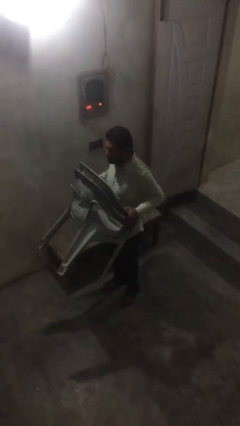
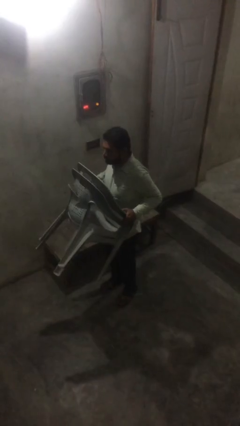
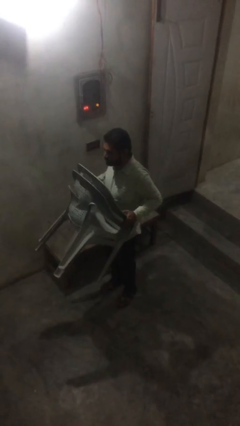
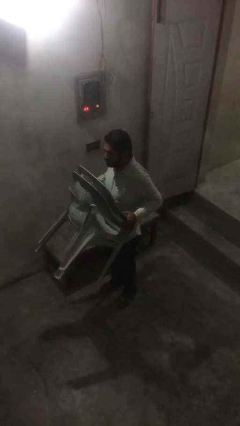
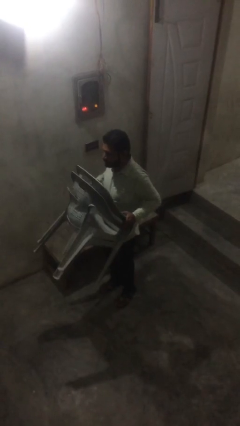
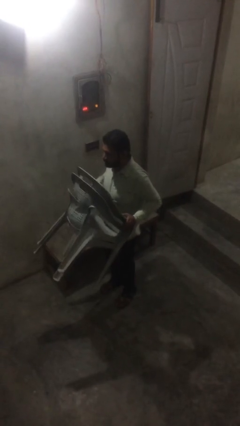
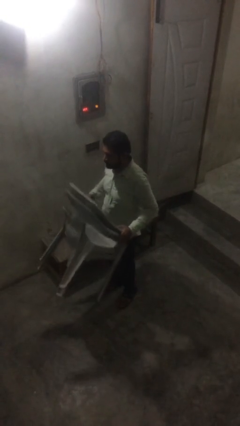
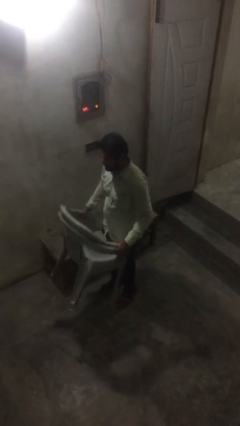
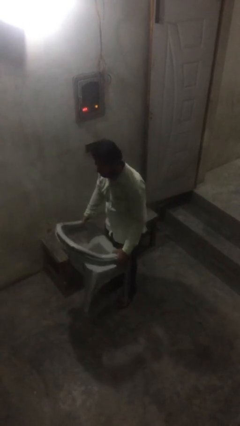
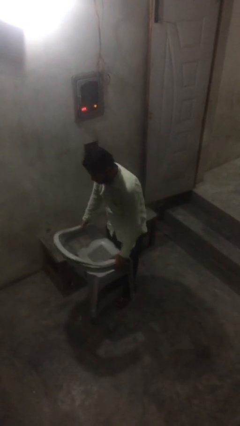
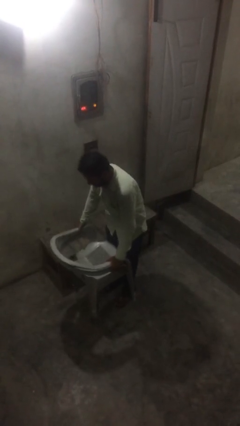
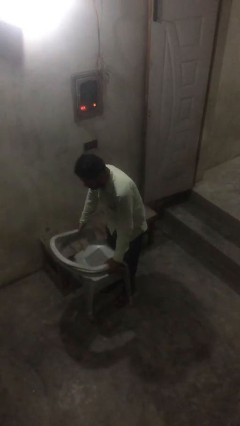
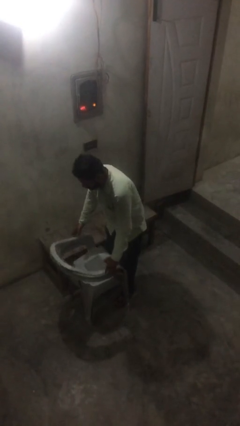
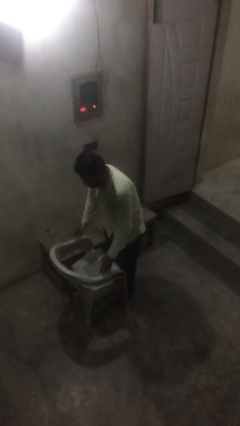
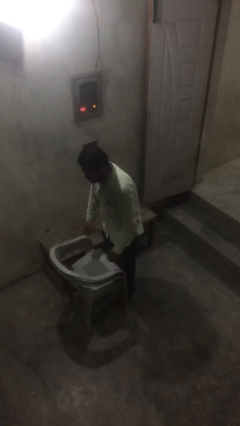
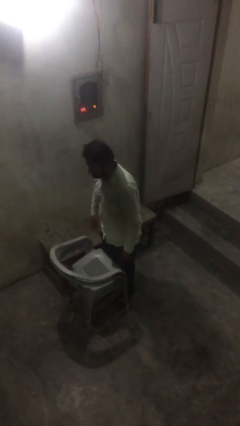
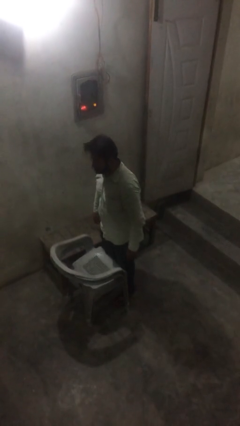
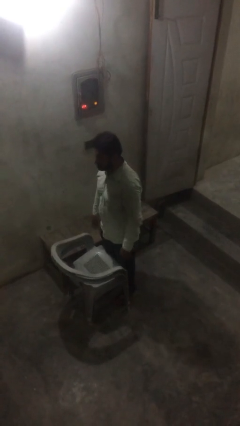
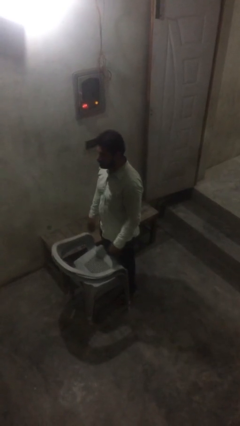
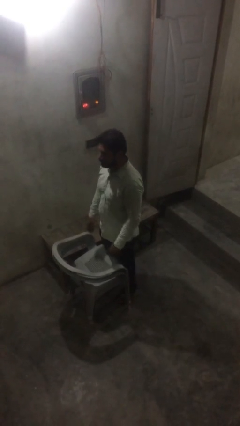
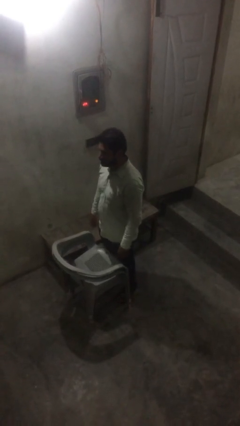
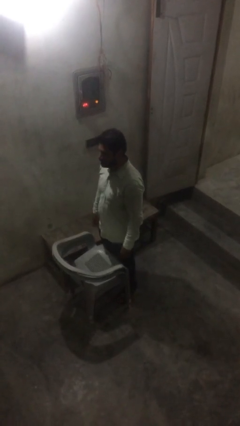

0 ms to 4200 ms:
person puts down object on floor

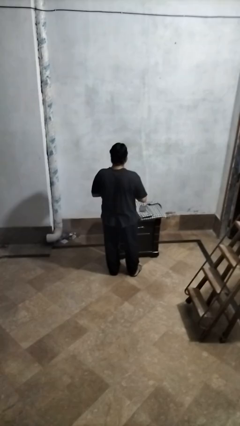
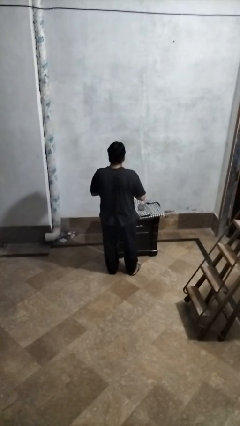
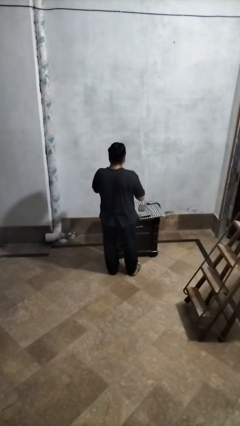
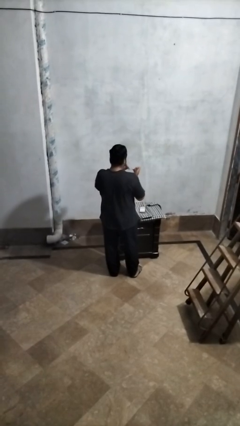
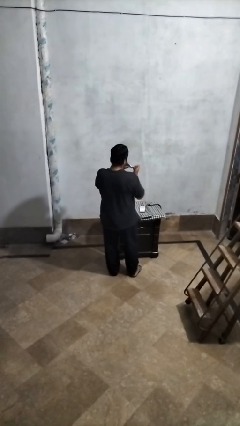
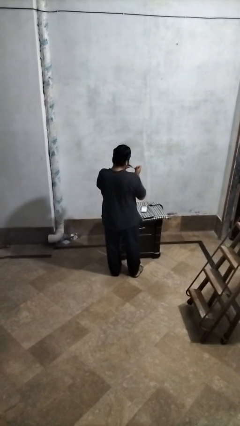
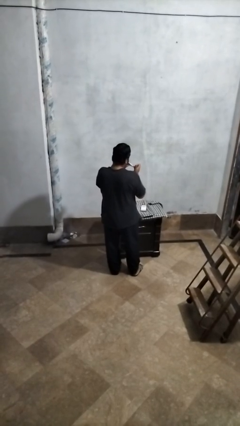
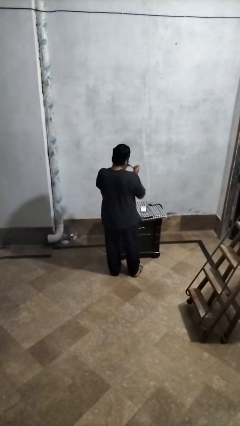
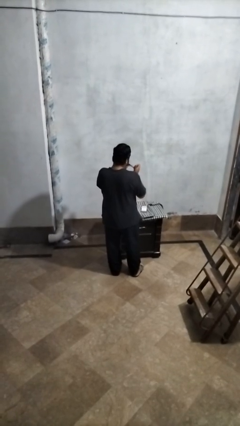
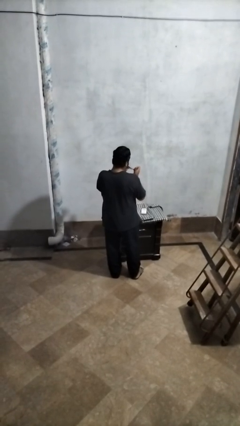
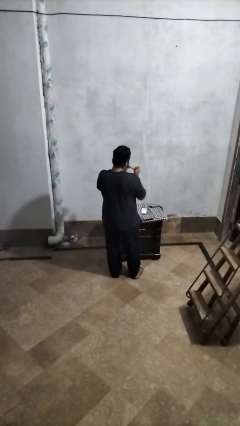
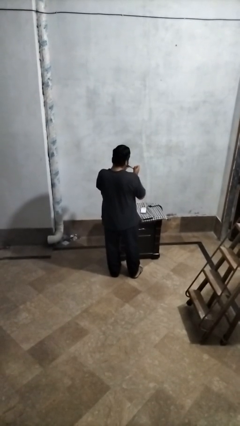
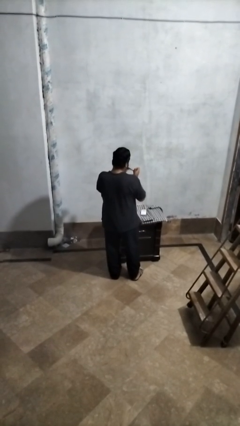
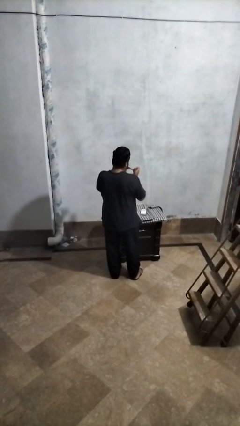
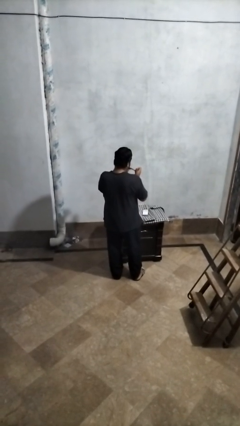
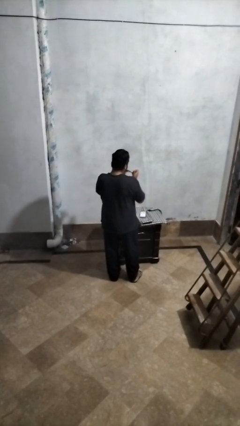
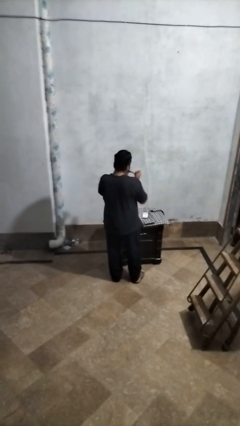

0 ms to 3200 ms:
person clips fingernails

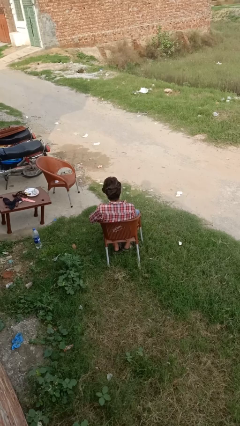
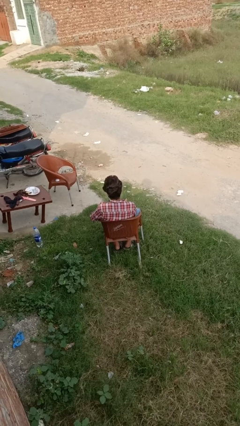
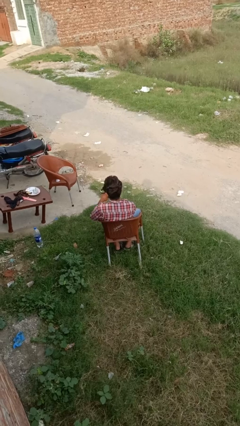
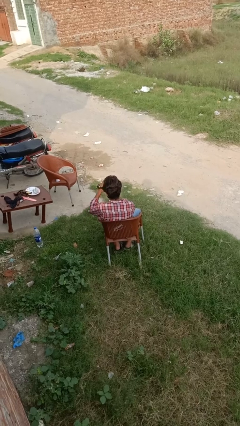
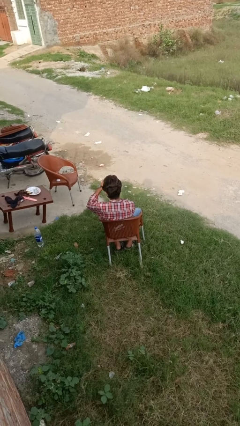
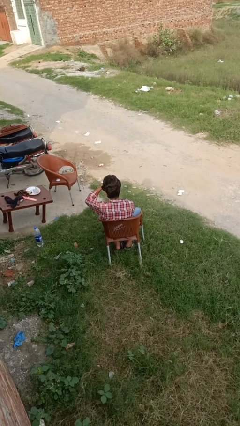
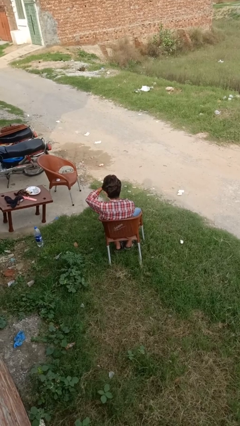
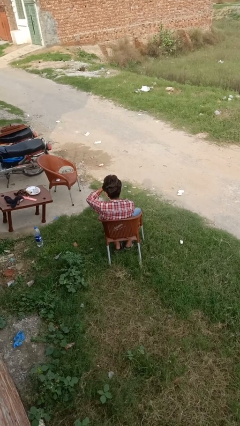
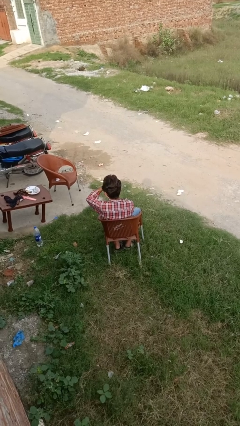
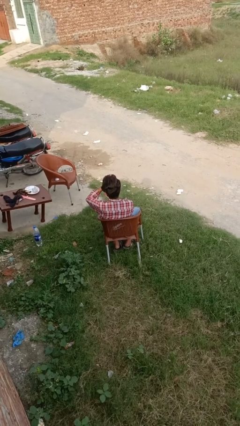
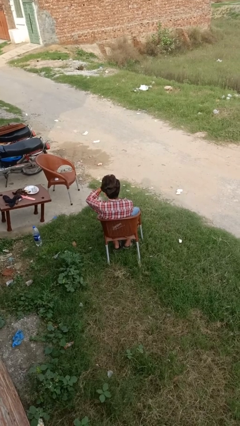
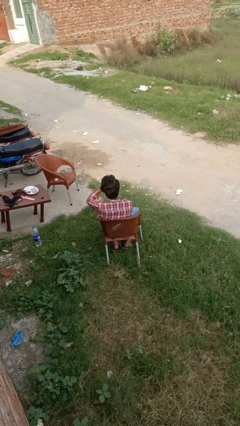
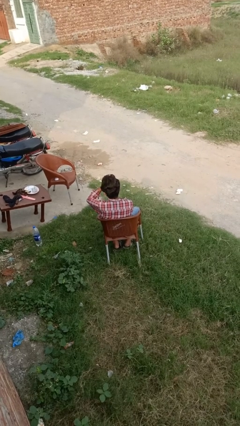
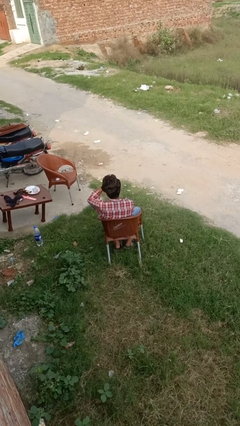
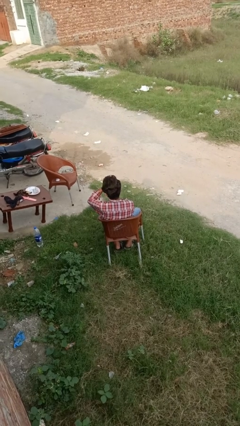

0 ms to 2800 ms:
person puts on wristwatch

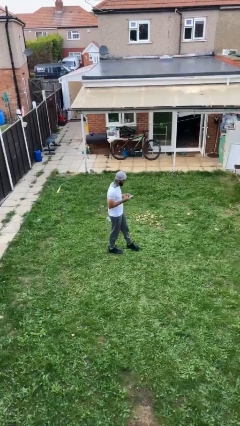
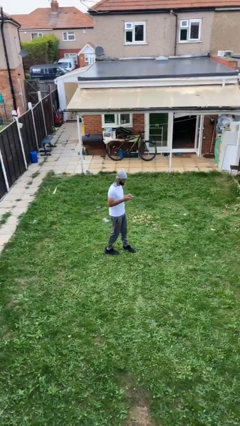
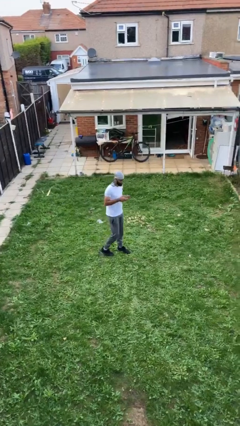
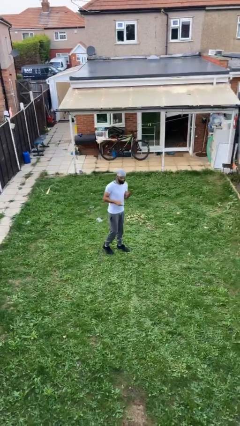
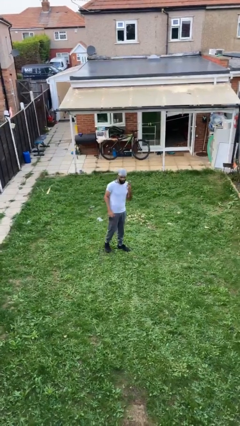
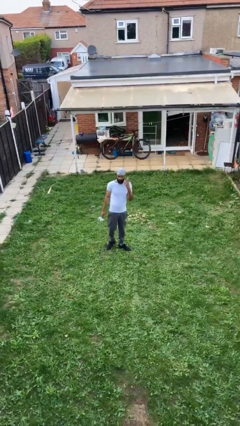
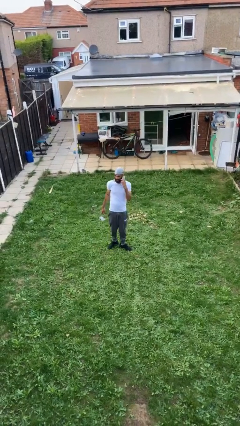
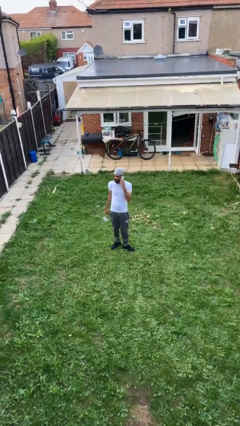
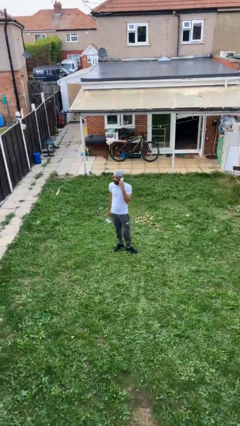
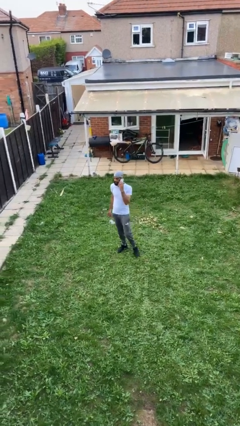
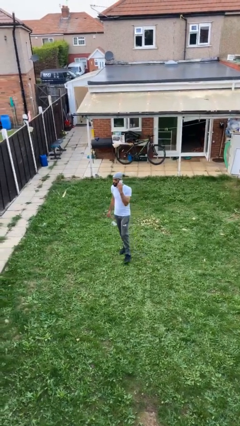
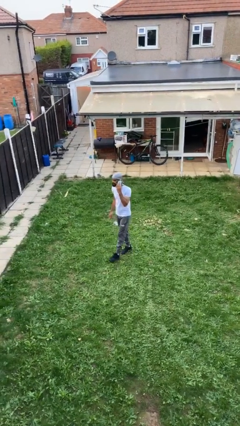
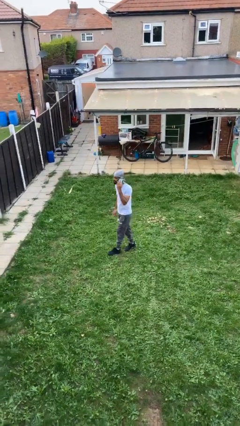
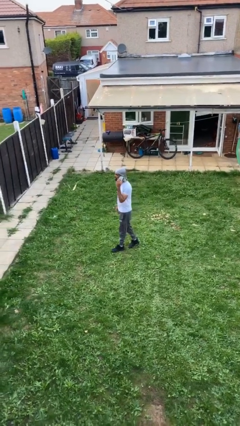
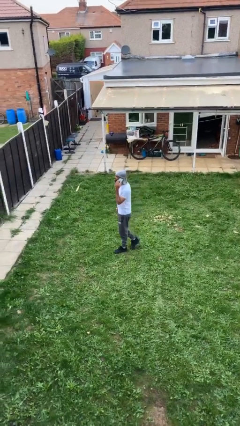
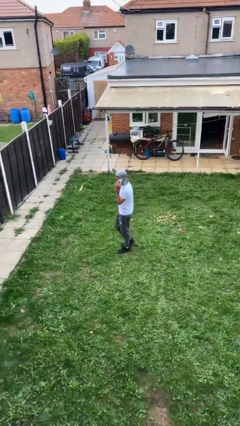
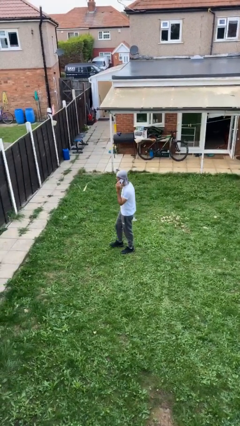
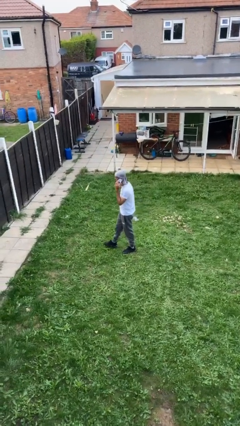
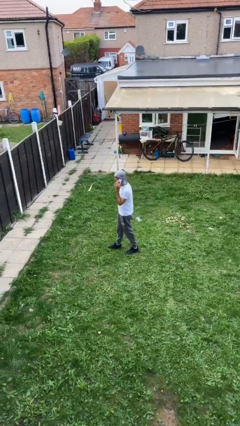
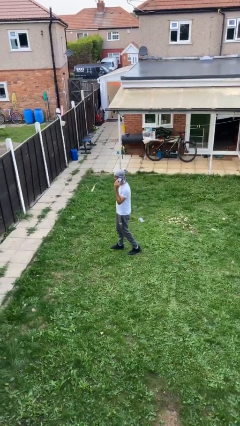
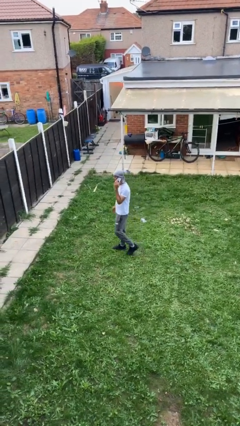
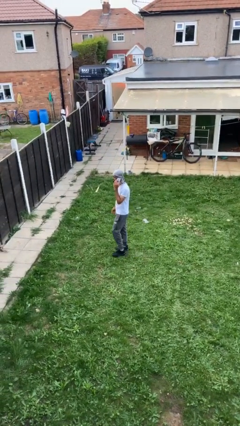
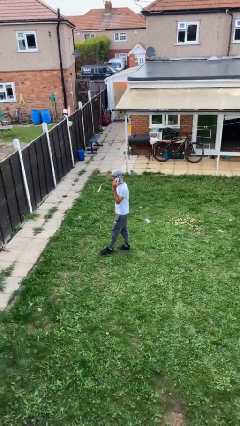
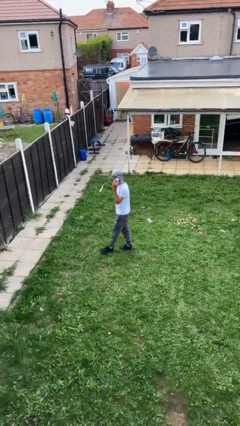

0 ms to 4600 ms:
person talks on phone

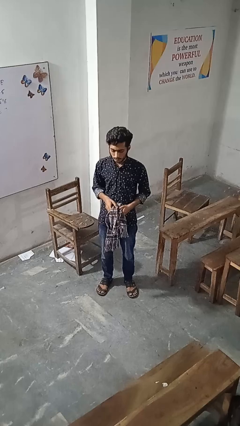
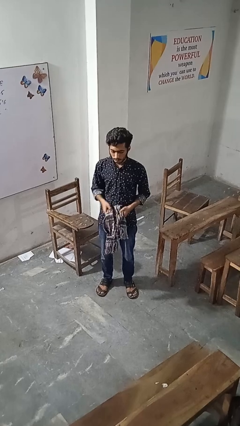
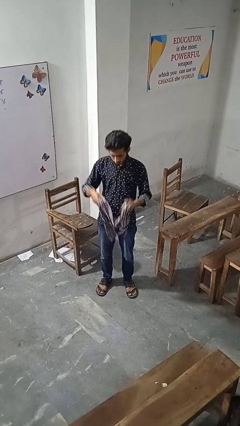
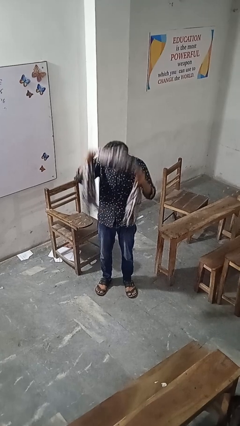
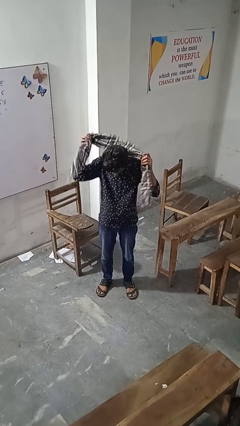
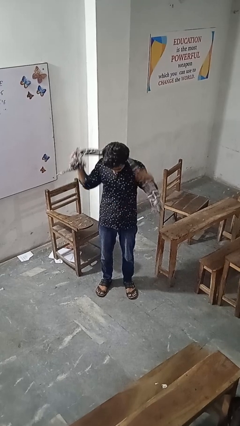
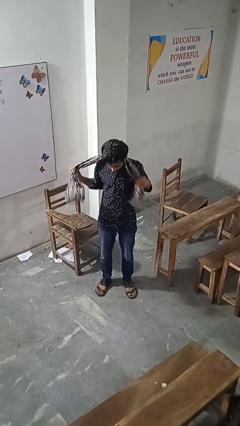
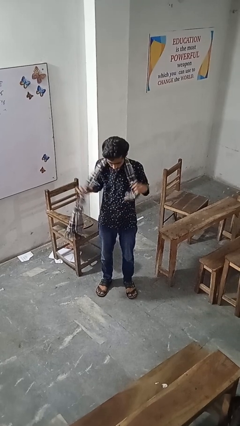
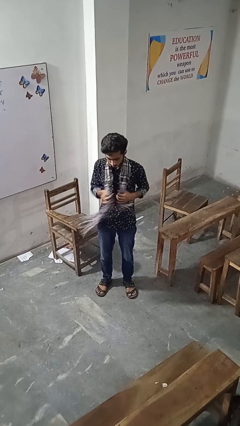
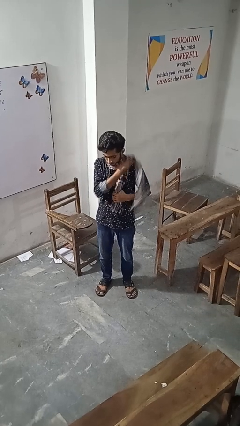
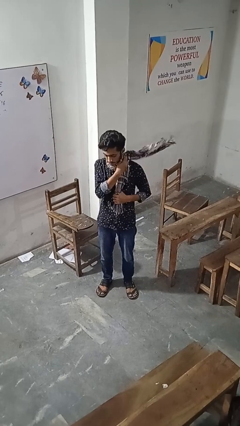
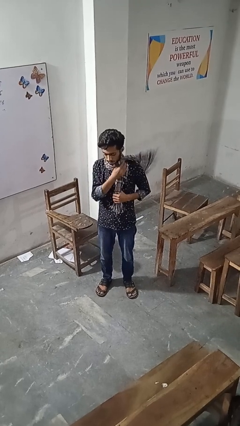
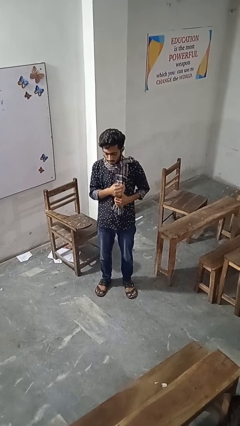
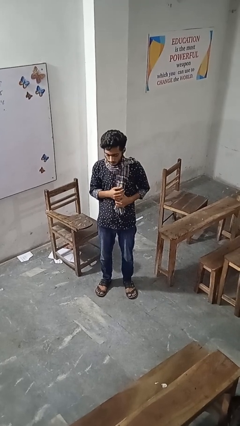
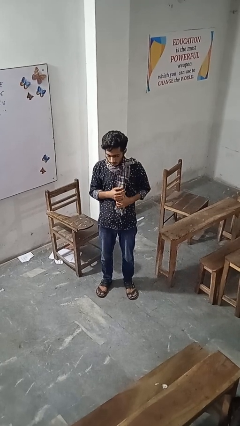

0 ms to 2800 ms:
person puts on scarf
